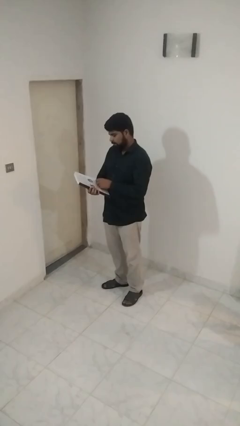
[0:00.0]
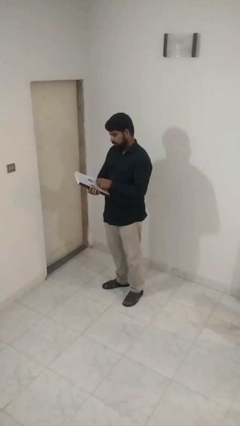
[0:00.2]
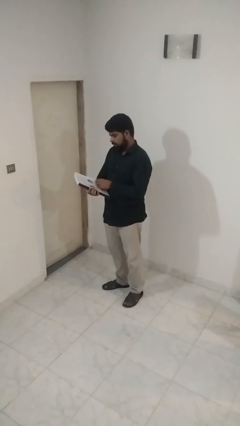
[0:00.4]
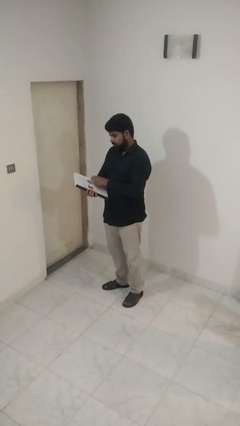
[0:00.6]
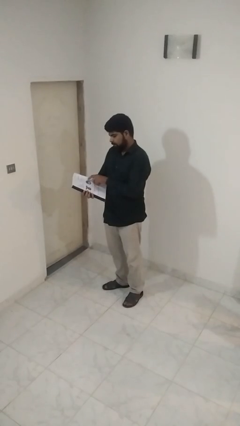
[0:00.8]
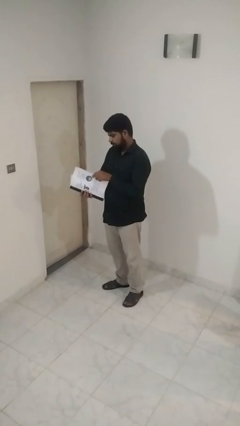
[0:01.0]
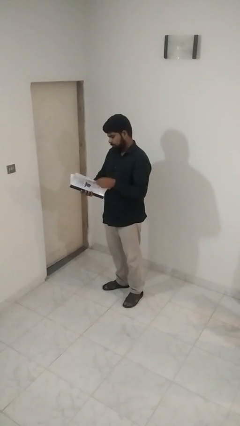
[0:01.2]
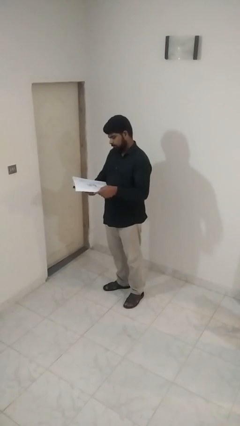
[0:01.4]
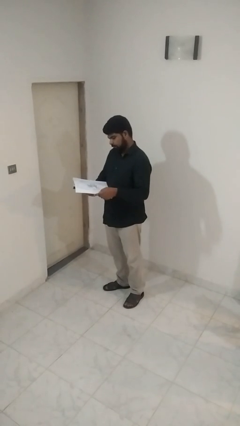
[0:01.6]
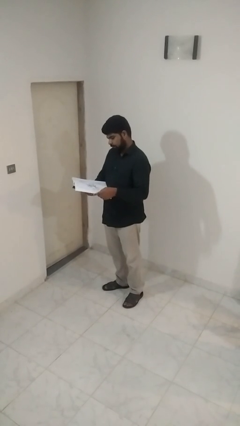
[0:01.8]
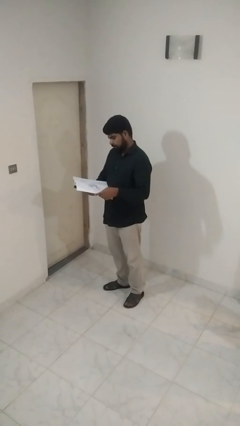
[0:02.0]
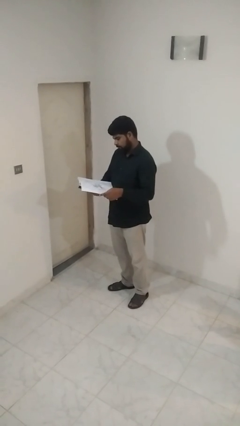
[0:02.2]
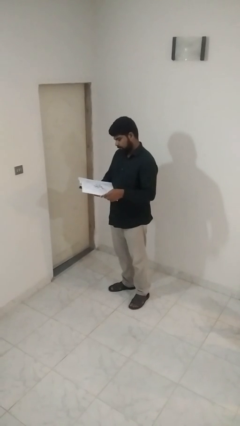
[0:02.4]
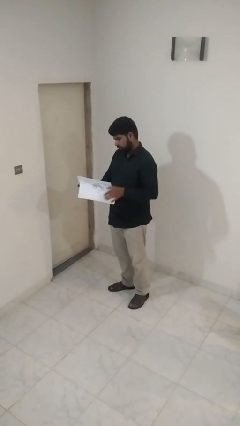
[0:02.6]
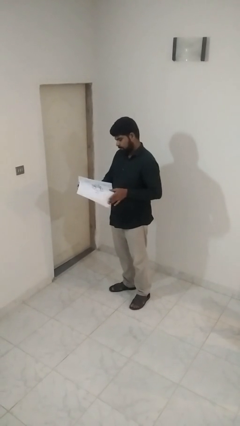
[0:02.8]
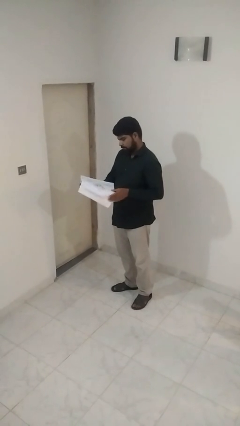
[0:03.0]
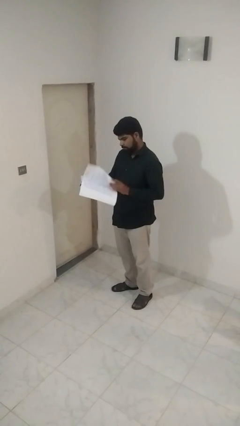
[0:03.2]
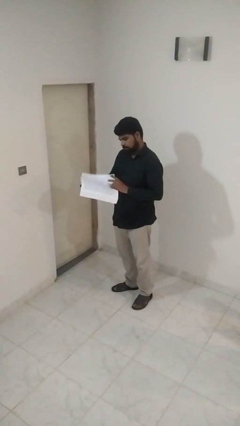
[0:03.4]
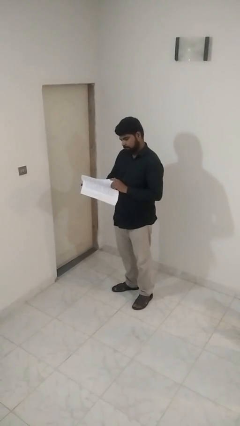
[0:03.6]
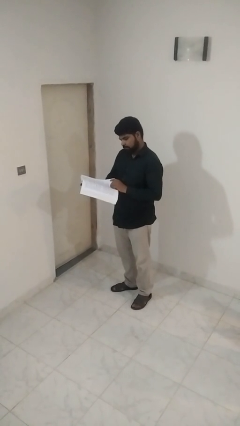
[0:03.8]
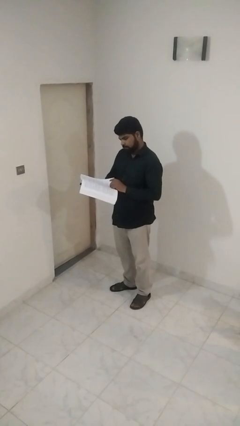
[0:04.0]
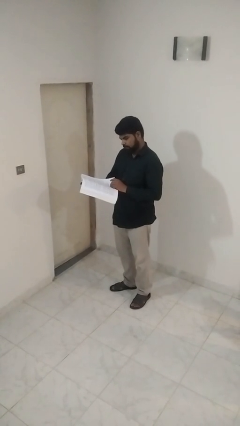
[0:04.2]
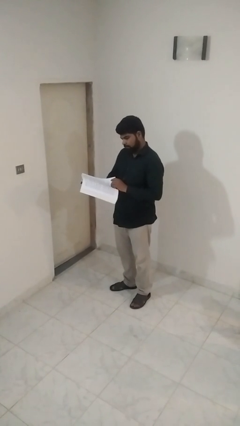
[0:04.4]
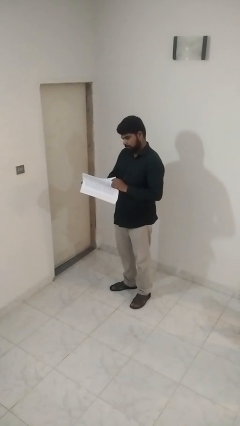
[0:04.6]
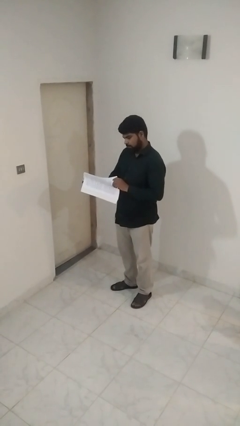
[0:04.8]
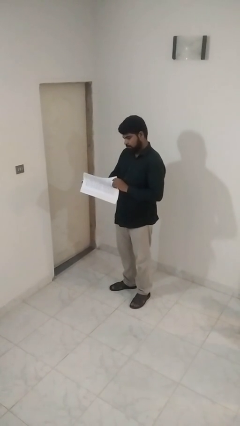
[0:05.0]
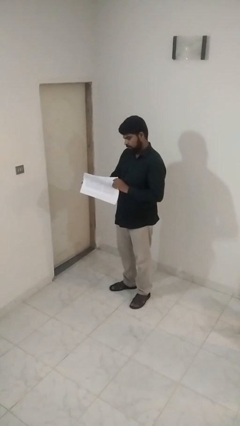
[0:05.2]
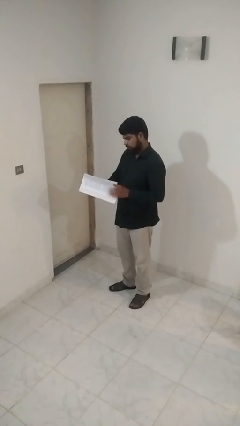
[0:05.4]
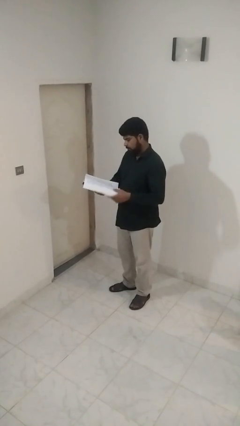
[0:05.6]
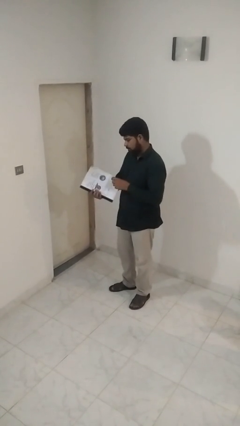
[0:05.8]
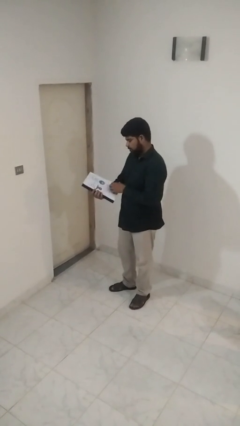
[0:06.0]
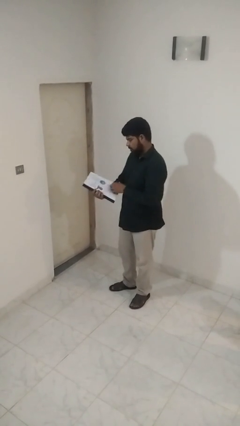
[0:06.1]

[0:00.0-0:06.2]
person reads book

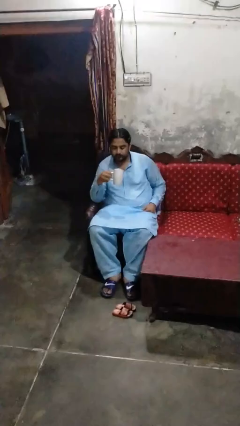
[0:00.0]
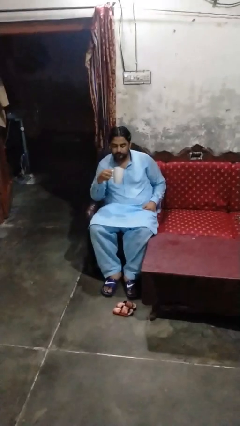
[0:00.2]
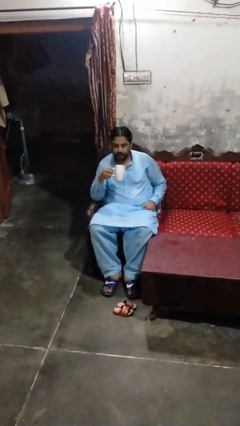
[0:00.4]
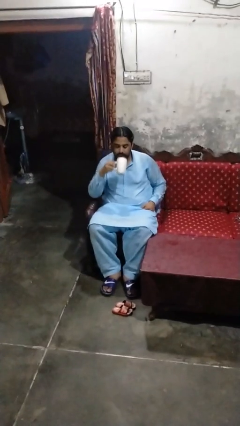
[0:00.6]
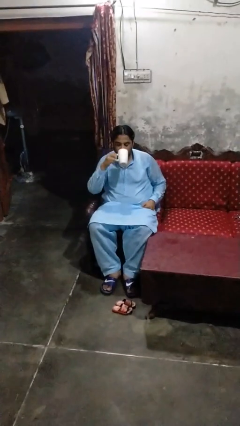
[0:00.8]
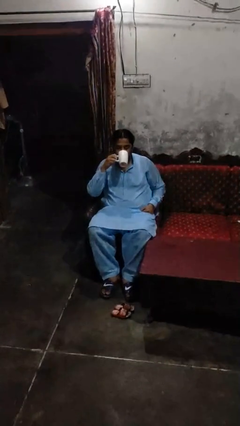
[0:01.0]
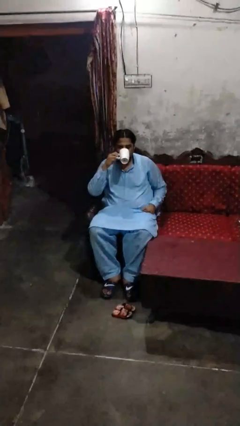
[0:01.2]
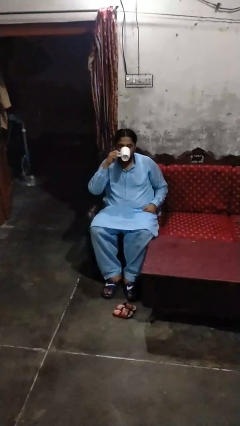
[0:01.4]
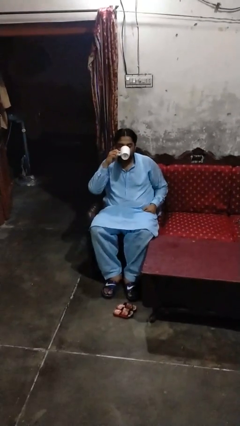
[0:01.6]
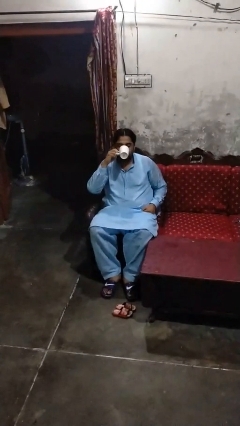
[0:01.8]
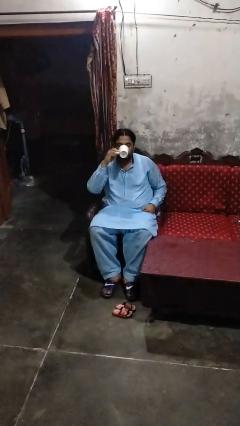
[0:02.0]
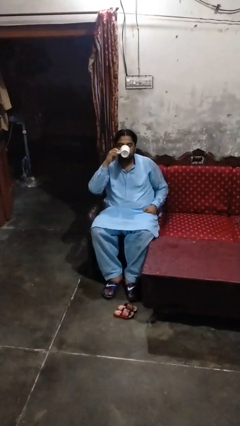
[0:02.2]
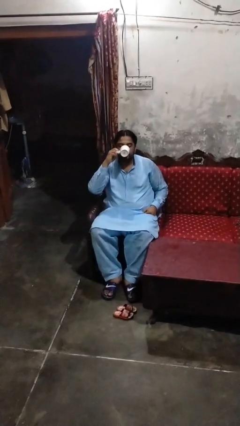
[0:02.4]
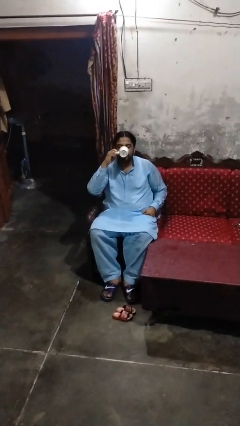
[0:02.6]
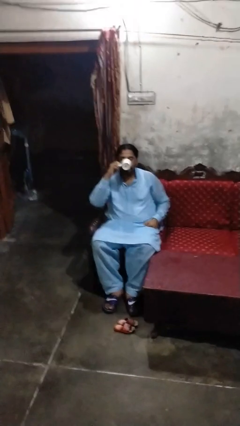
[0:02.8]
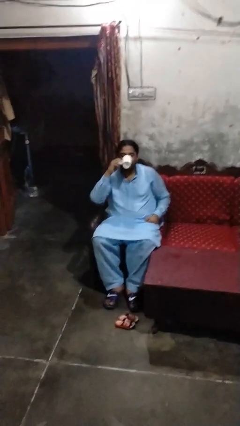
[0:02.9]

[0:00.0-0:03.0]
person drinks from mug

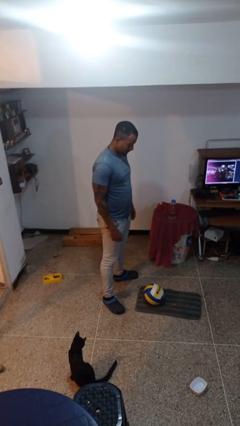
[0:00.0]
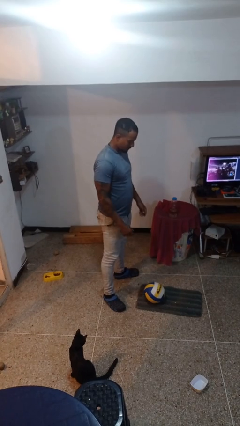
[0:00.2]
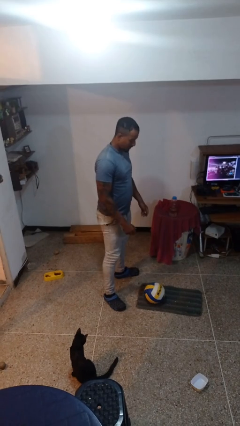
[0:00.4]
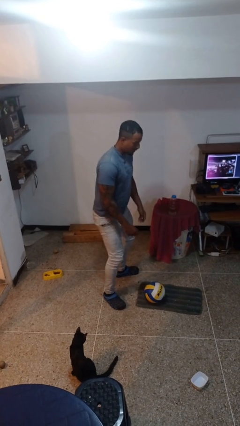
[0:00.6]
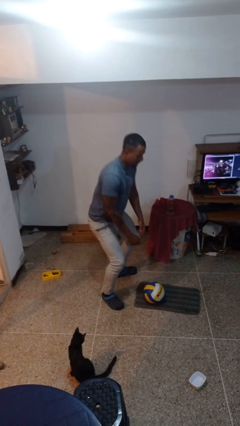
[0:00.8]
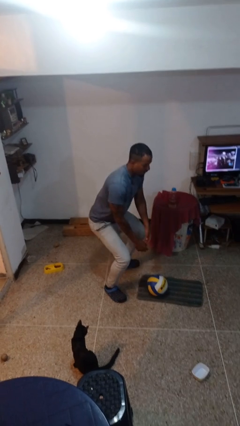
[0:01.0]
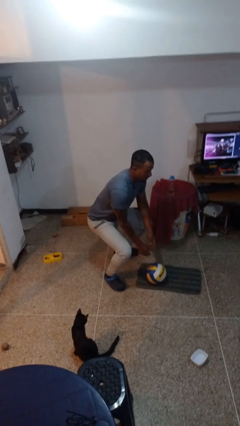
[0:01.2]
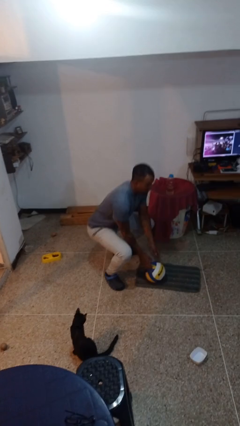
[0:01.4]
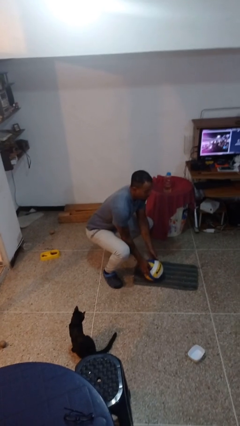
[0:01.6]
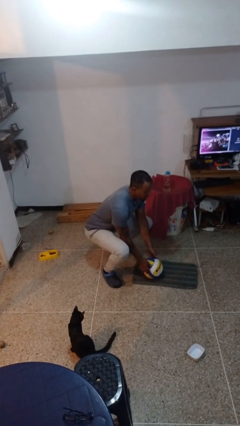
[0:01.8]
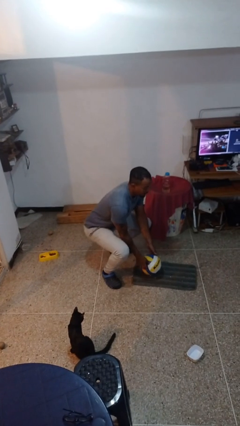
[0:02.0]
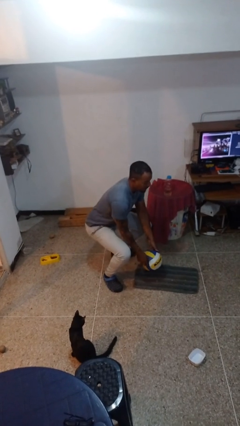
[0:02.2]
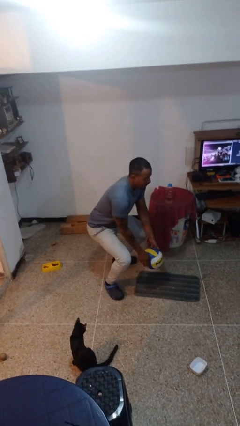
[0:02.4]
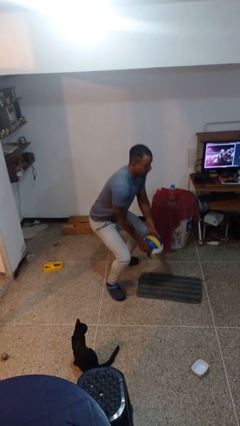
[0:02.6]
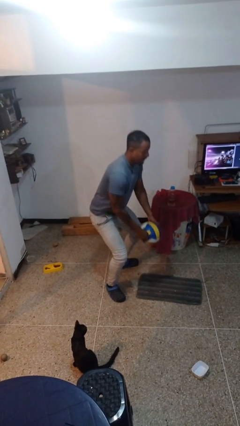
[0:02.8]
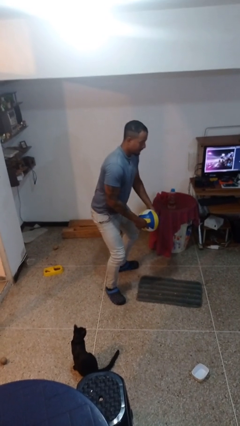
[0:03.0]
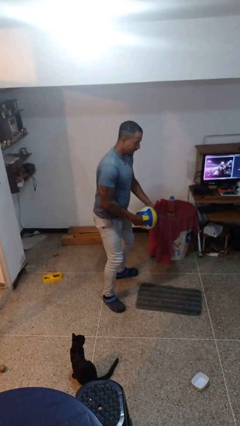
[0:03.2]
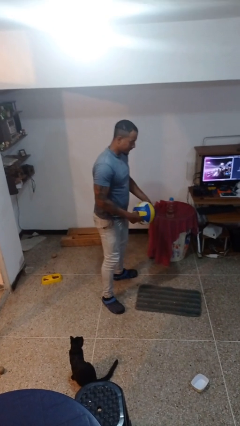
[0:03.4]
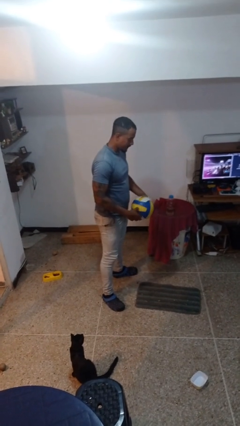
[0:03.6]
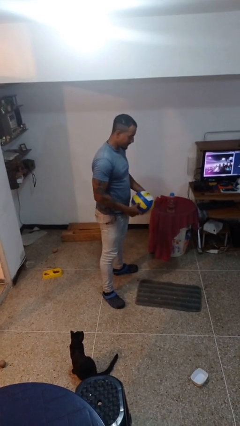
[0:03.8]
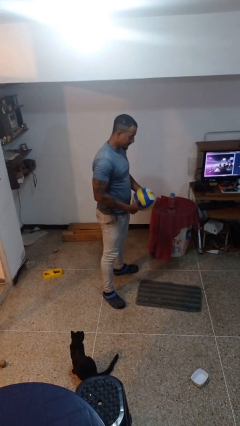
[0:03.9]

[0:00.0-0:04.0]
person picks up object from floor

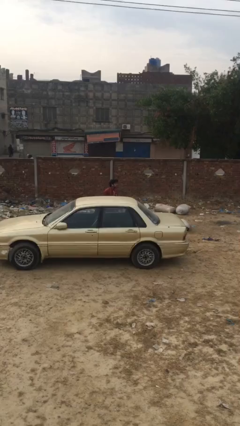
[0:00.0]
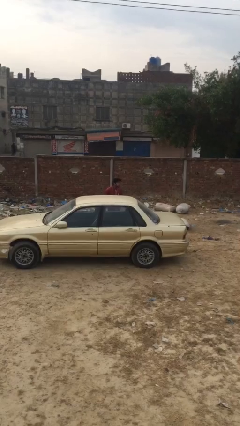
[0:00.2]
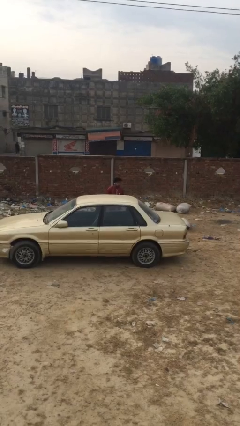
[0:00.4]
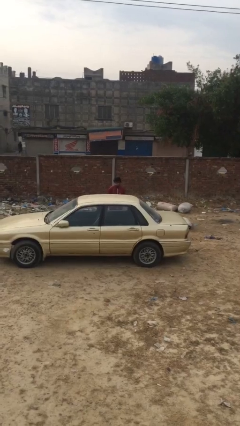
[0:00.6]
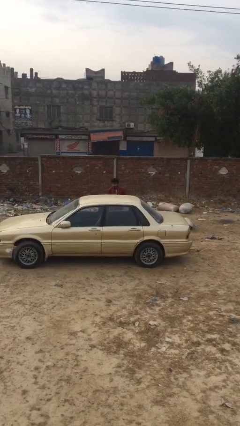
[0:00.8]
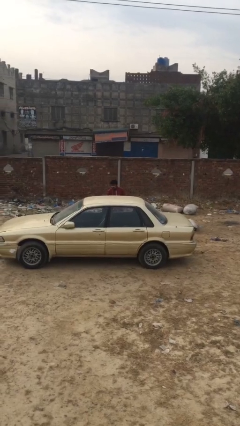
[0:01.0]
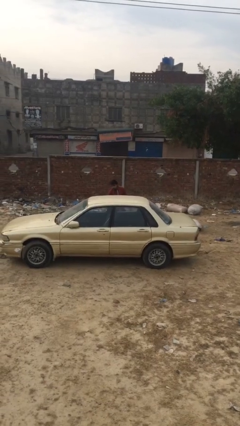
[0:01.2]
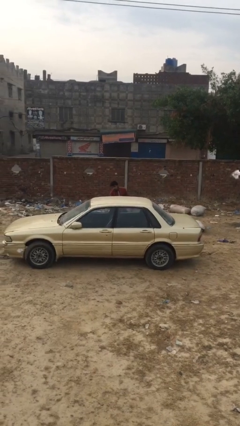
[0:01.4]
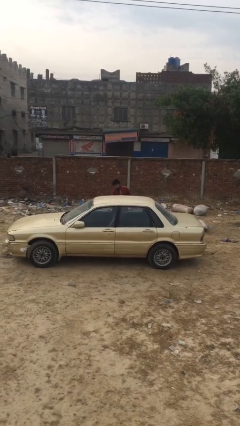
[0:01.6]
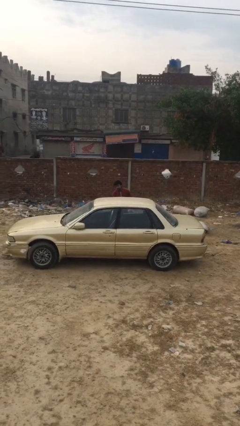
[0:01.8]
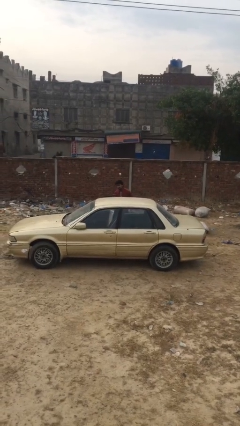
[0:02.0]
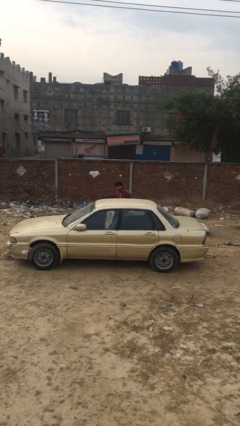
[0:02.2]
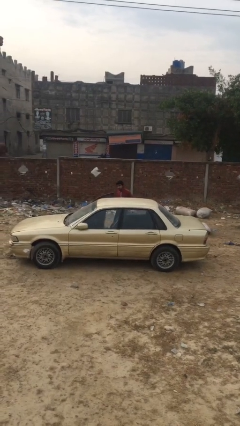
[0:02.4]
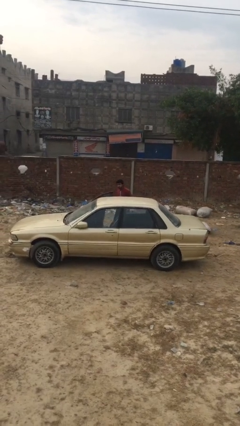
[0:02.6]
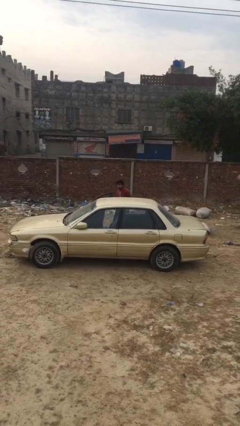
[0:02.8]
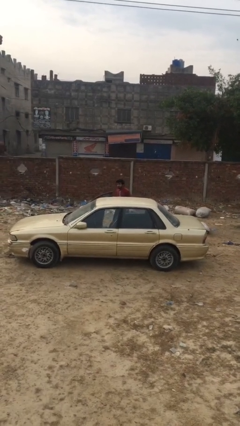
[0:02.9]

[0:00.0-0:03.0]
person opens car door

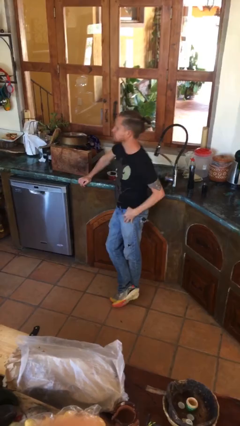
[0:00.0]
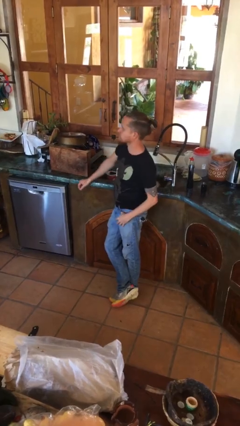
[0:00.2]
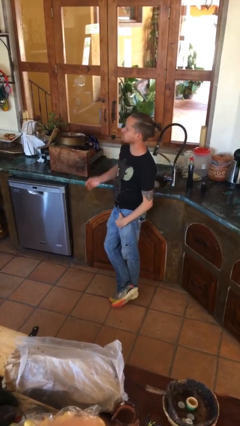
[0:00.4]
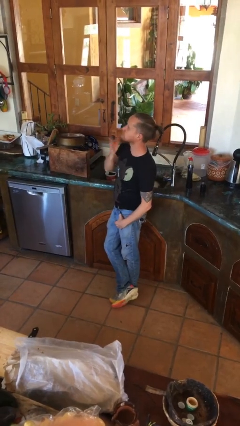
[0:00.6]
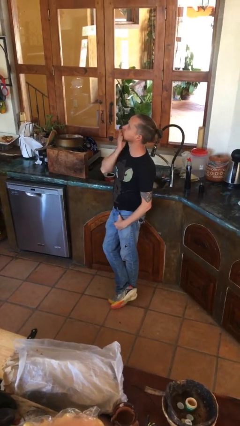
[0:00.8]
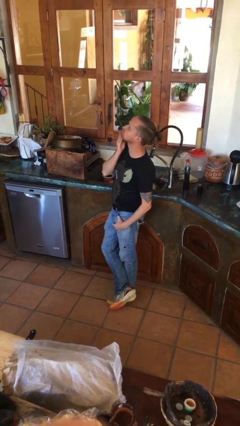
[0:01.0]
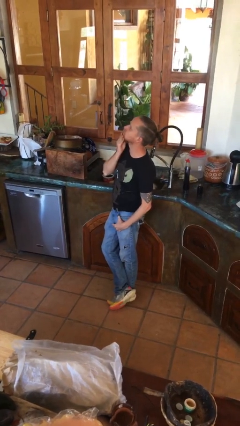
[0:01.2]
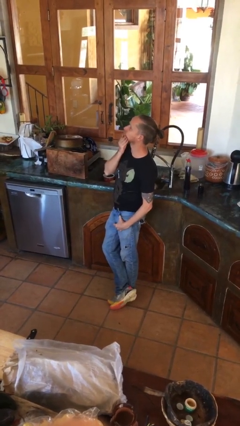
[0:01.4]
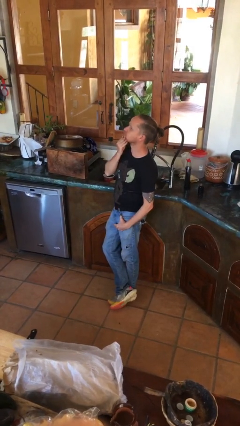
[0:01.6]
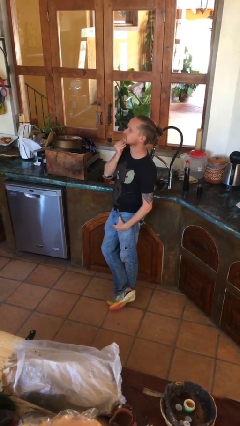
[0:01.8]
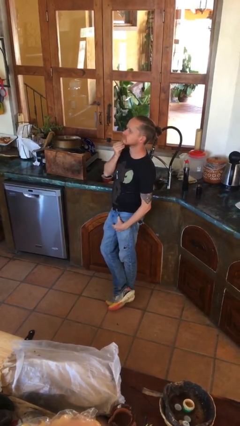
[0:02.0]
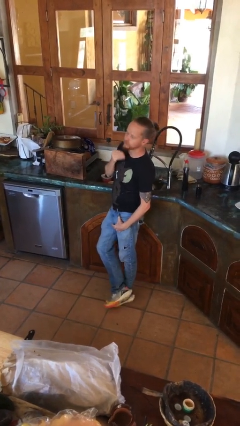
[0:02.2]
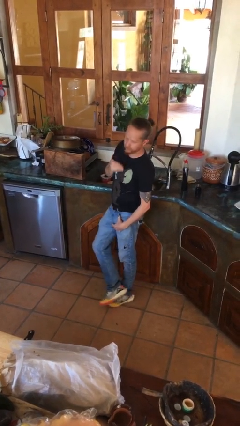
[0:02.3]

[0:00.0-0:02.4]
person strokes chin
